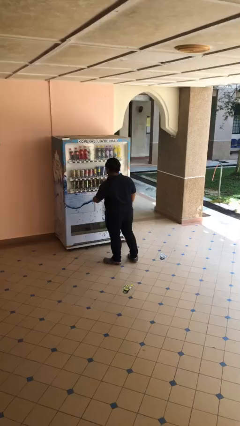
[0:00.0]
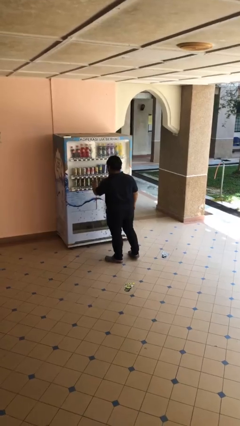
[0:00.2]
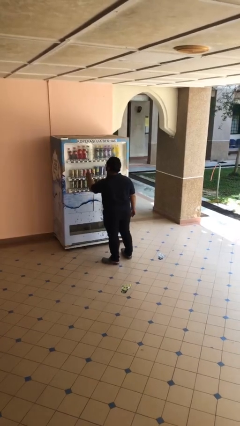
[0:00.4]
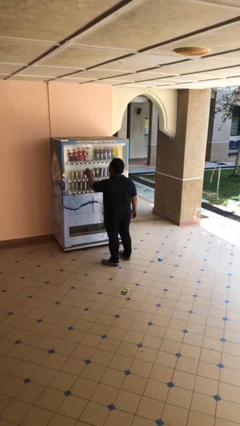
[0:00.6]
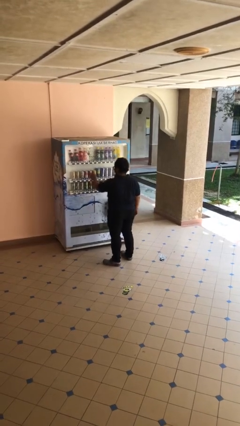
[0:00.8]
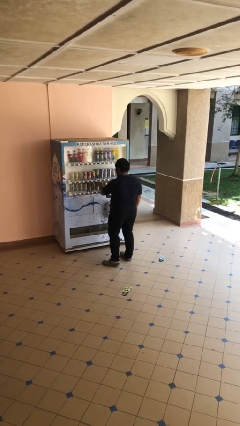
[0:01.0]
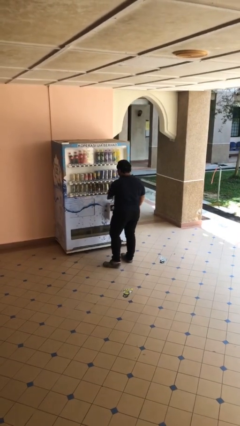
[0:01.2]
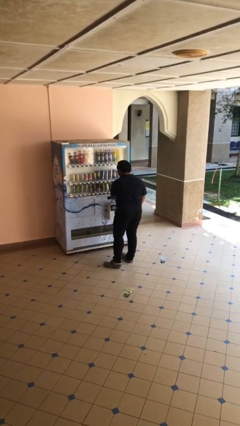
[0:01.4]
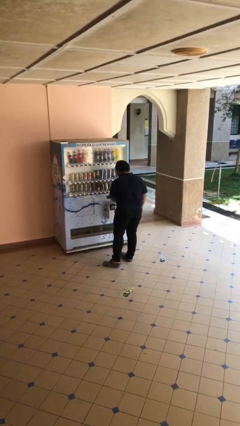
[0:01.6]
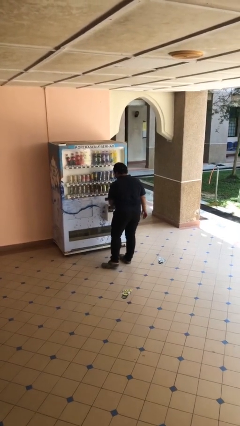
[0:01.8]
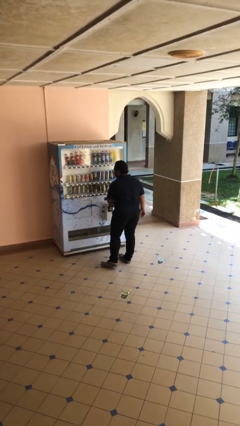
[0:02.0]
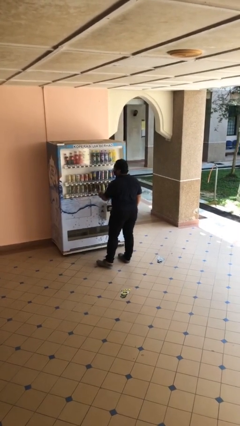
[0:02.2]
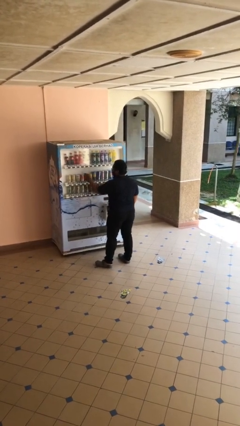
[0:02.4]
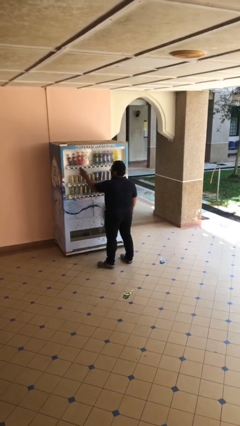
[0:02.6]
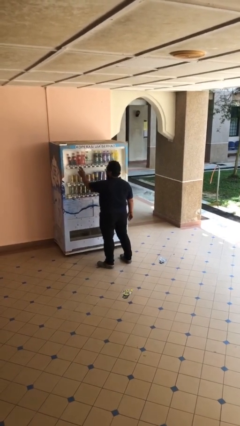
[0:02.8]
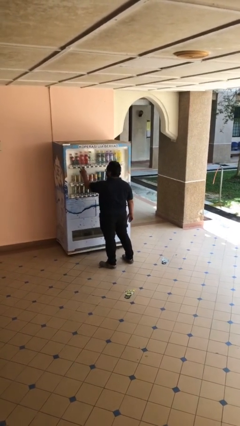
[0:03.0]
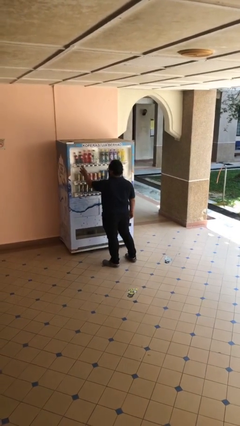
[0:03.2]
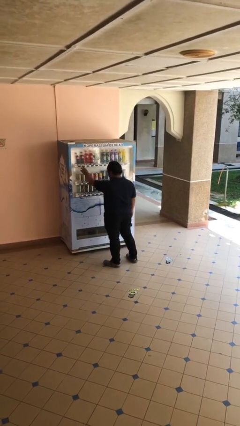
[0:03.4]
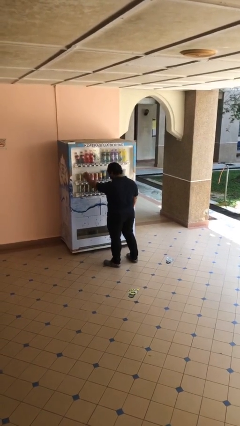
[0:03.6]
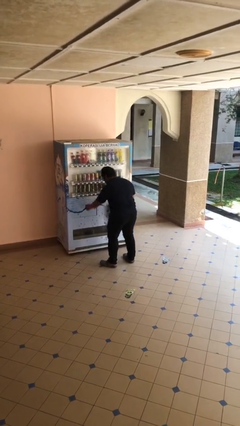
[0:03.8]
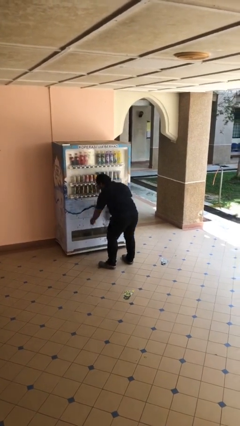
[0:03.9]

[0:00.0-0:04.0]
person purchases from machine

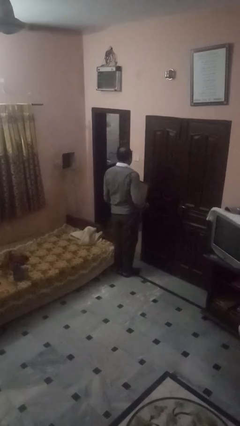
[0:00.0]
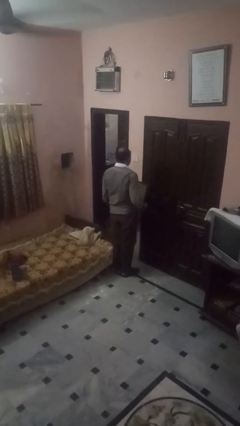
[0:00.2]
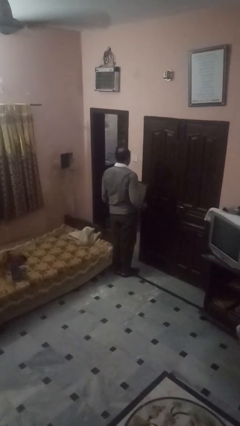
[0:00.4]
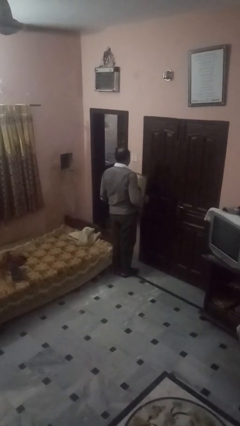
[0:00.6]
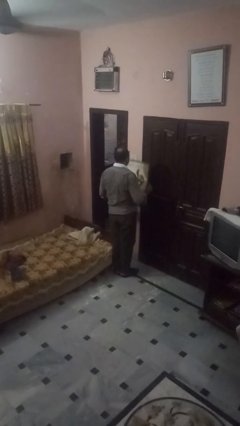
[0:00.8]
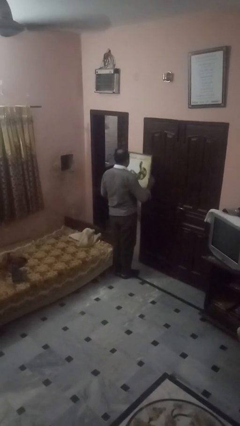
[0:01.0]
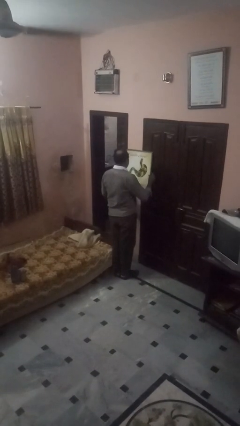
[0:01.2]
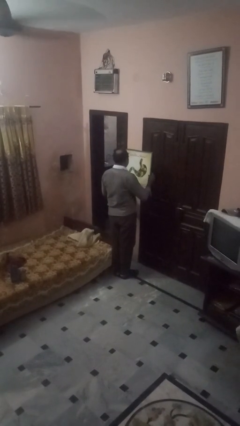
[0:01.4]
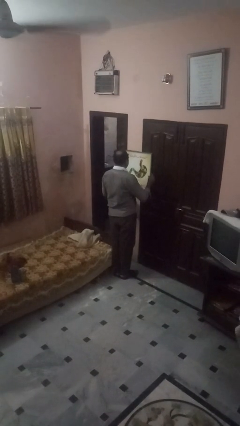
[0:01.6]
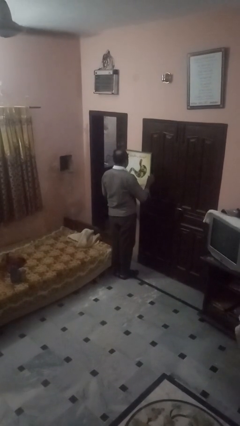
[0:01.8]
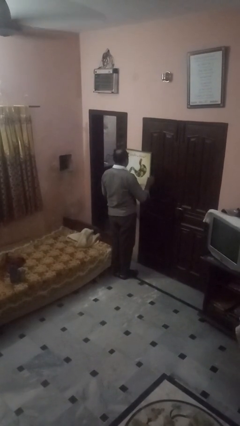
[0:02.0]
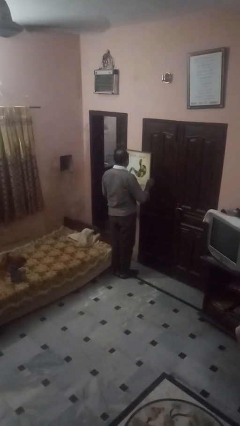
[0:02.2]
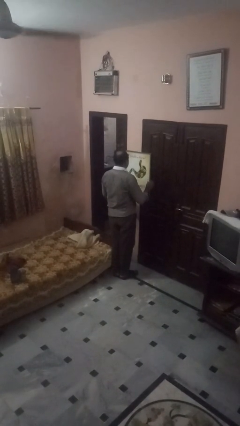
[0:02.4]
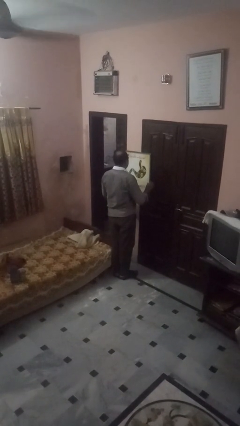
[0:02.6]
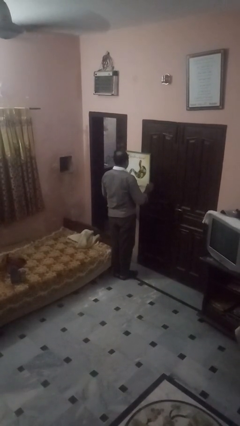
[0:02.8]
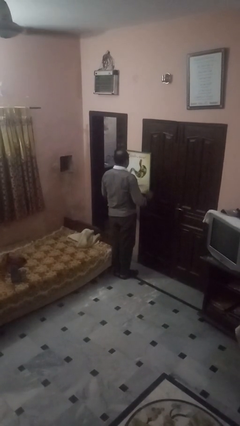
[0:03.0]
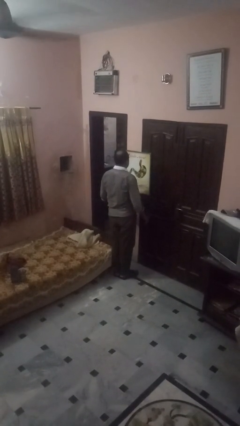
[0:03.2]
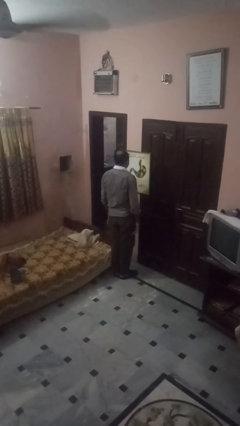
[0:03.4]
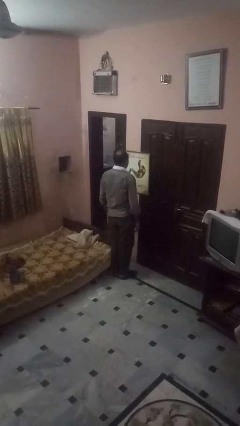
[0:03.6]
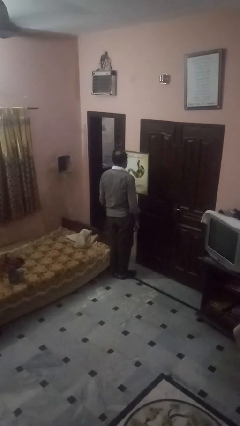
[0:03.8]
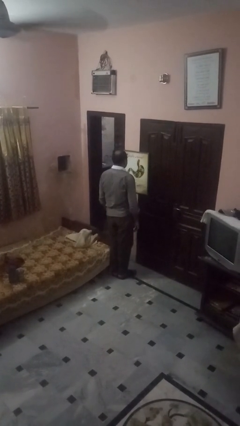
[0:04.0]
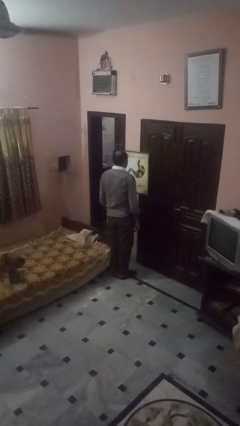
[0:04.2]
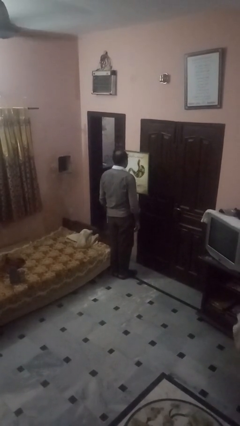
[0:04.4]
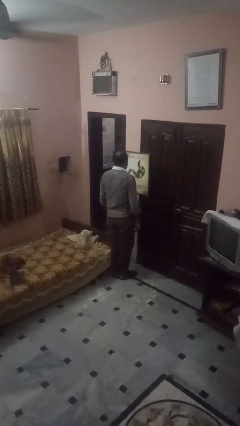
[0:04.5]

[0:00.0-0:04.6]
person puts up picture frame

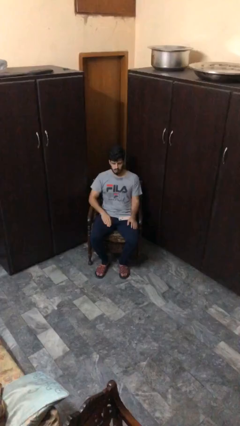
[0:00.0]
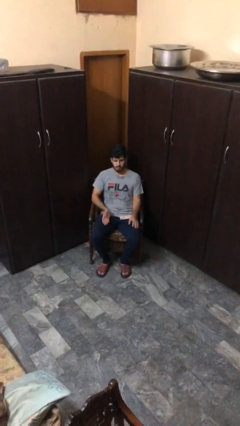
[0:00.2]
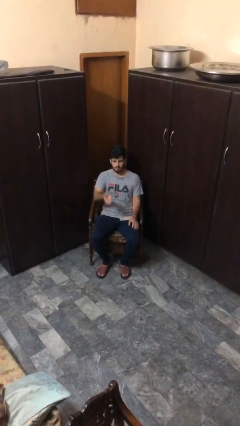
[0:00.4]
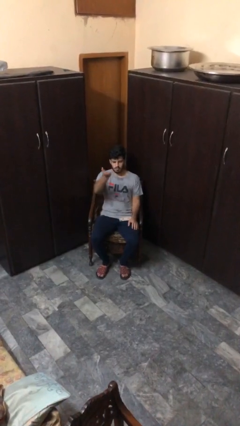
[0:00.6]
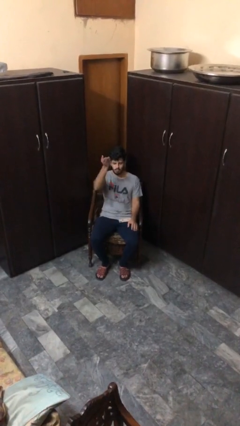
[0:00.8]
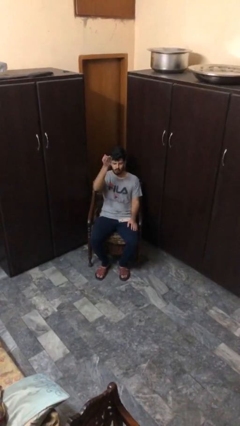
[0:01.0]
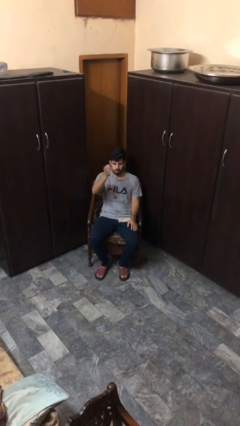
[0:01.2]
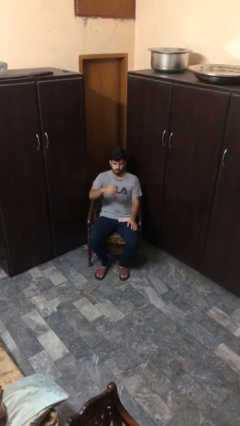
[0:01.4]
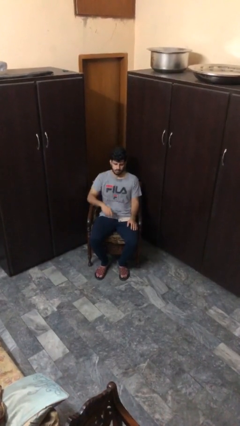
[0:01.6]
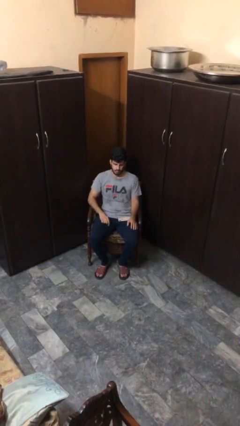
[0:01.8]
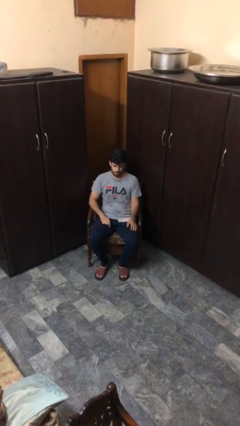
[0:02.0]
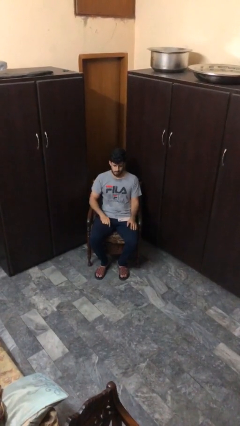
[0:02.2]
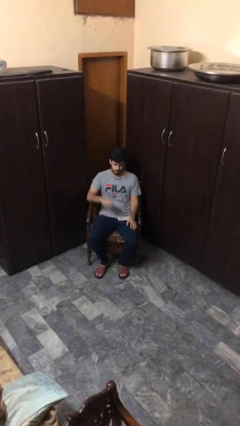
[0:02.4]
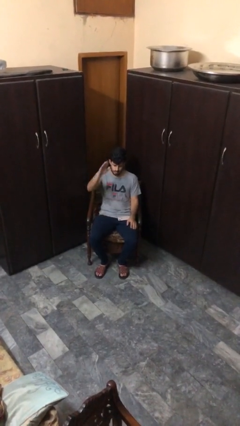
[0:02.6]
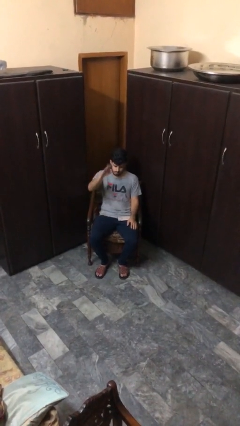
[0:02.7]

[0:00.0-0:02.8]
person gestures swipe up

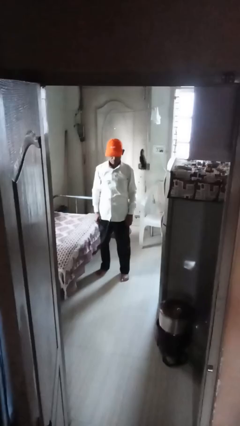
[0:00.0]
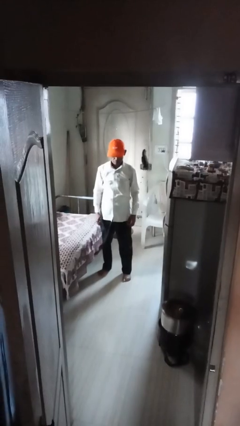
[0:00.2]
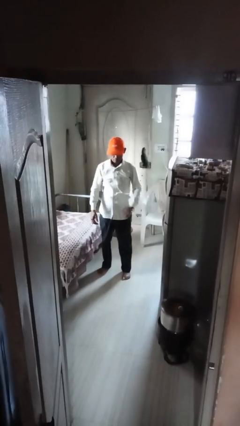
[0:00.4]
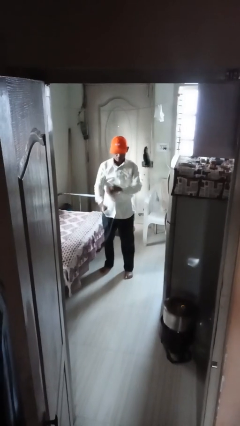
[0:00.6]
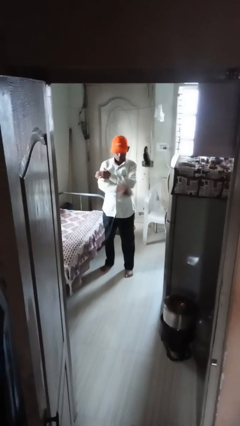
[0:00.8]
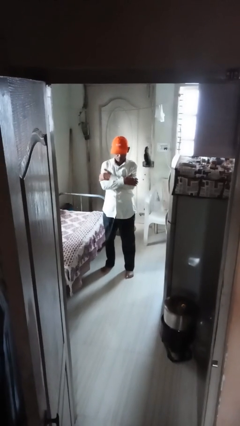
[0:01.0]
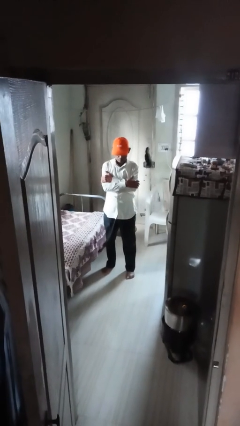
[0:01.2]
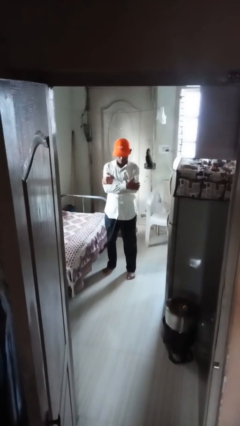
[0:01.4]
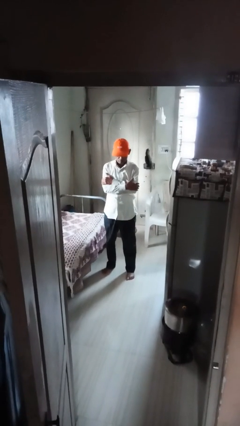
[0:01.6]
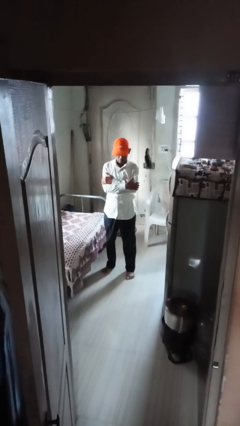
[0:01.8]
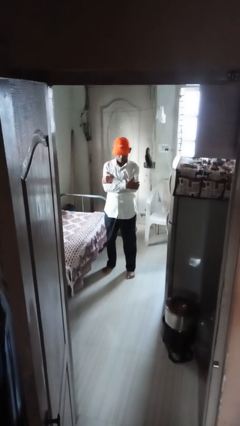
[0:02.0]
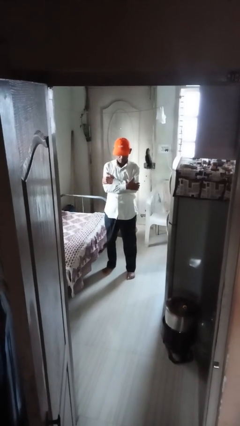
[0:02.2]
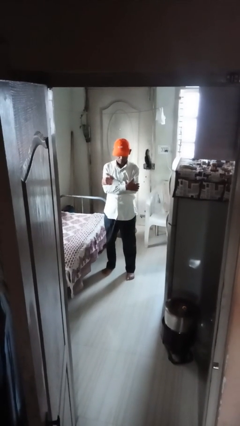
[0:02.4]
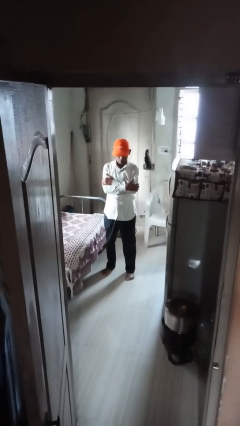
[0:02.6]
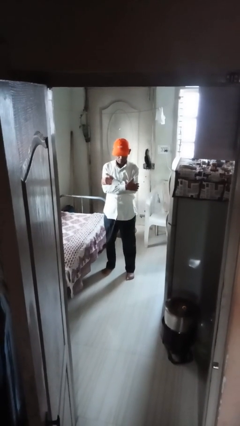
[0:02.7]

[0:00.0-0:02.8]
person crosses arms

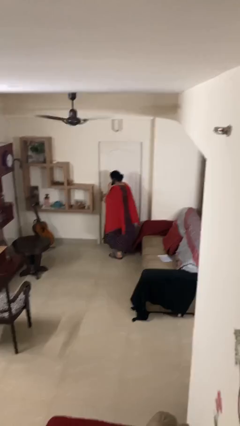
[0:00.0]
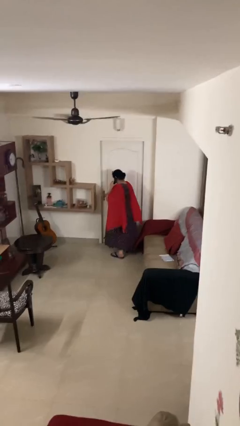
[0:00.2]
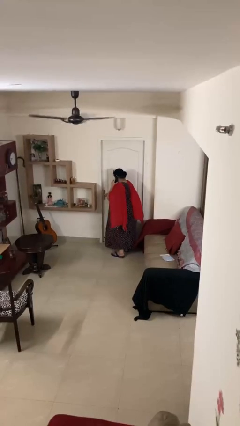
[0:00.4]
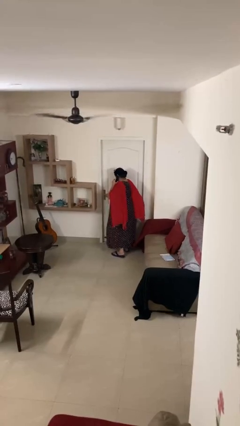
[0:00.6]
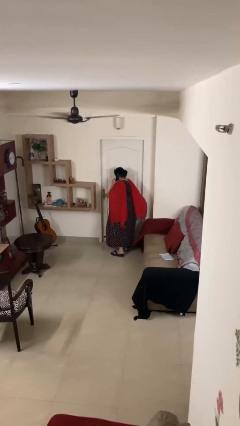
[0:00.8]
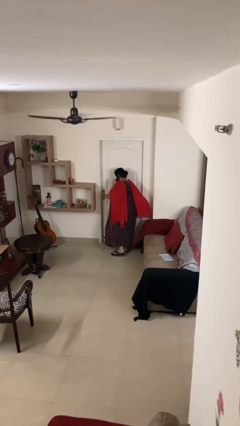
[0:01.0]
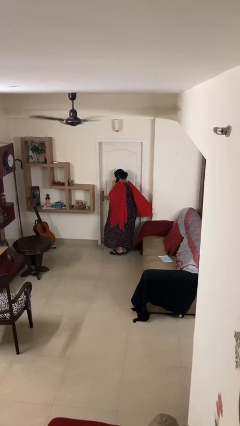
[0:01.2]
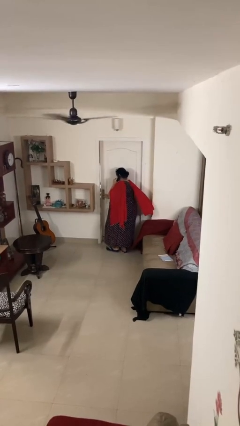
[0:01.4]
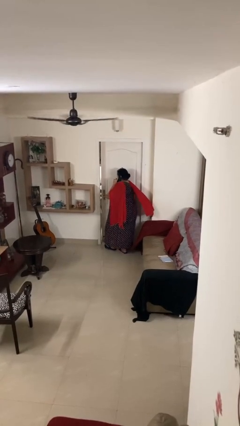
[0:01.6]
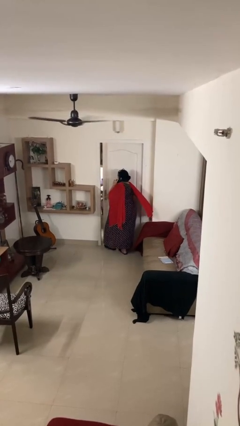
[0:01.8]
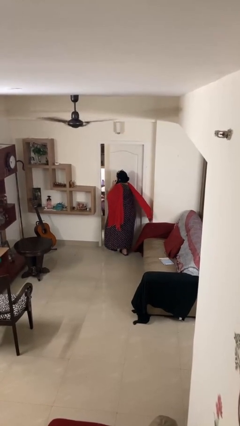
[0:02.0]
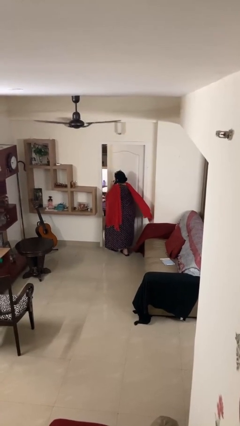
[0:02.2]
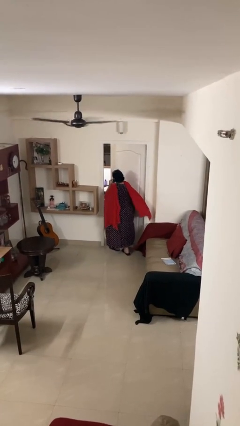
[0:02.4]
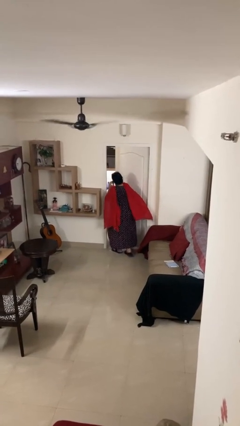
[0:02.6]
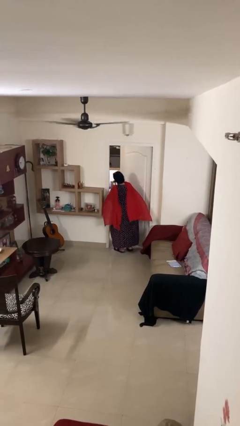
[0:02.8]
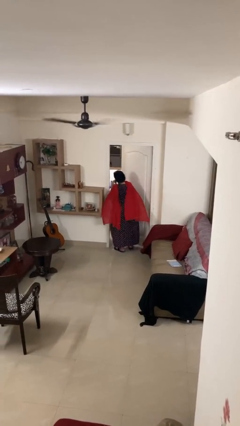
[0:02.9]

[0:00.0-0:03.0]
person opens facility door
